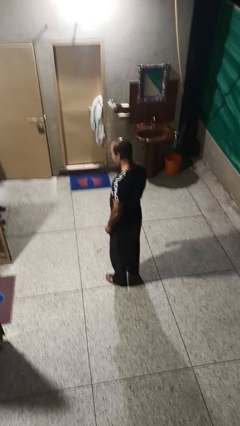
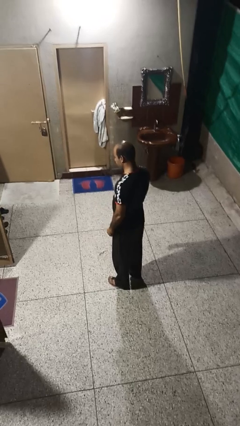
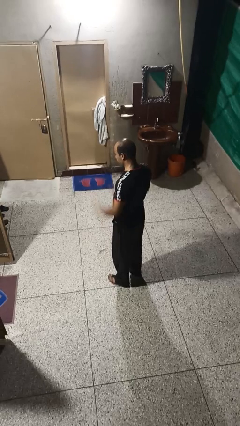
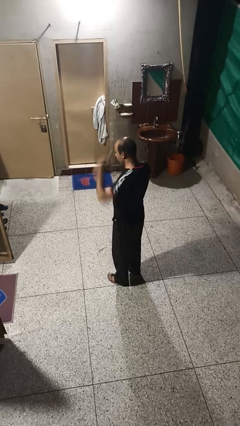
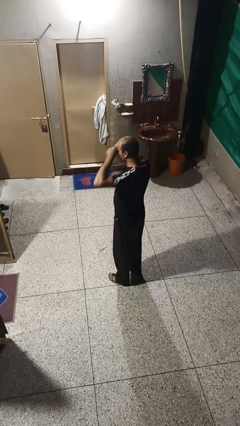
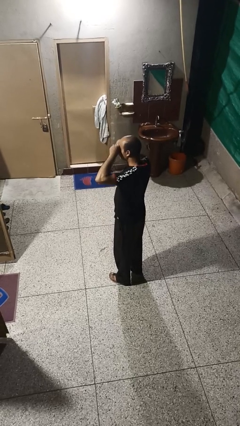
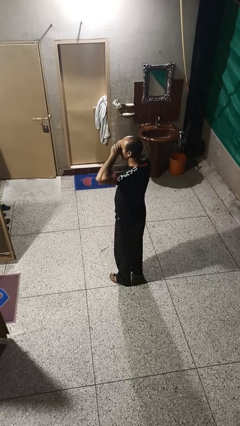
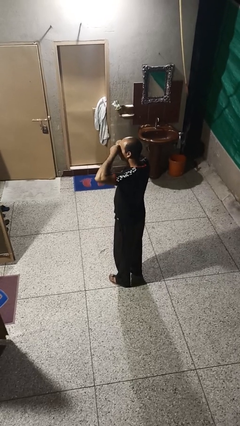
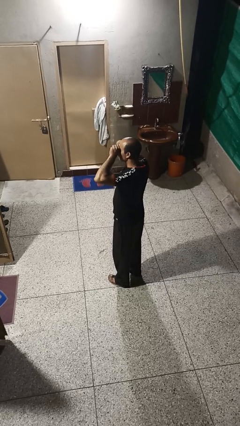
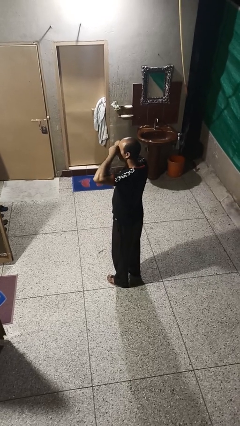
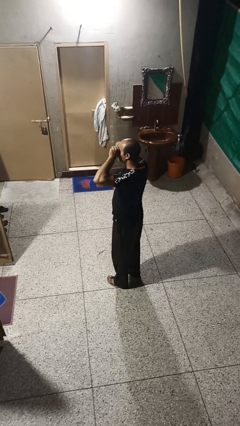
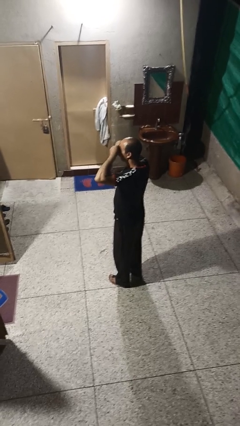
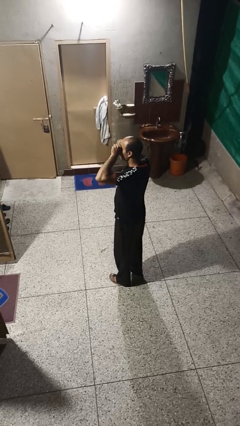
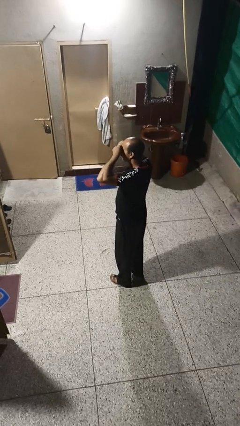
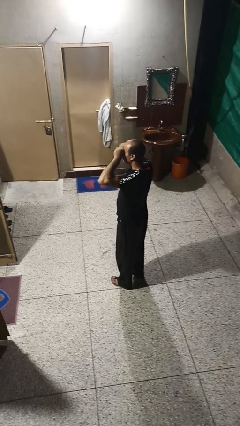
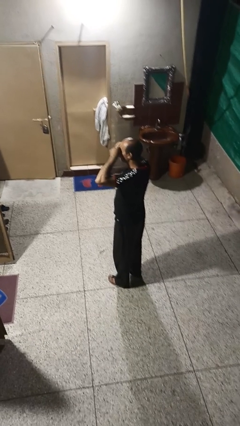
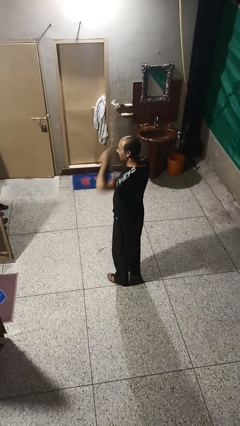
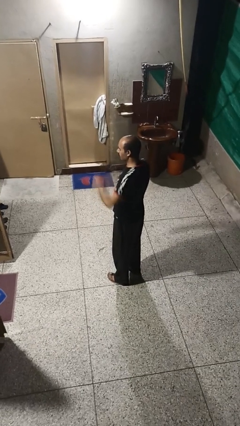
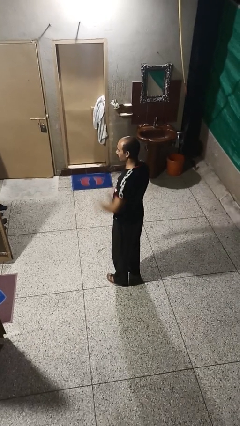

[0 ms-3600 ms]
person rubs eyes

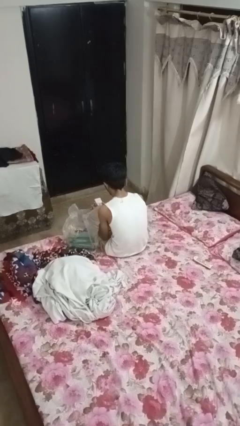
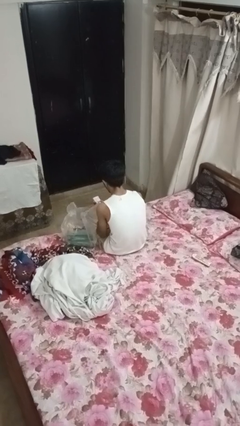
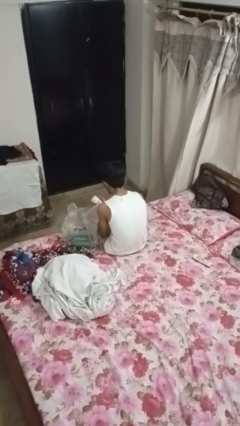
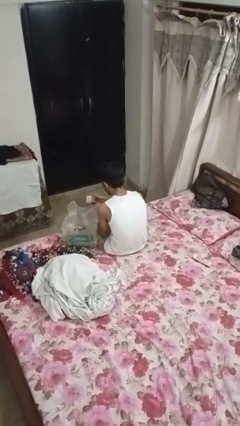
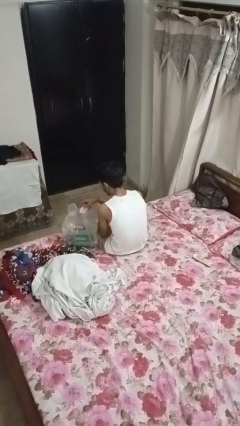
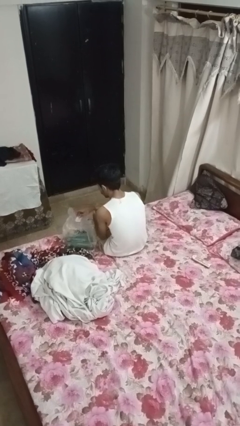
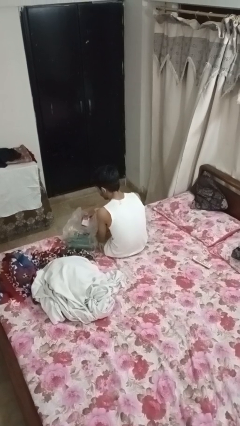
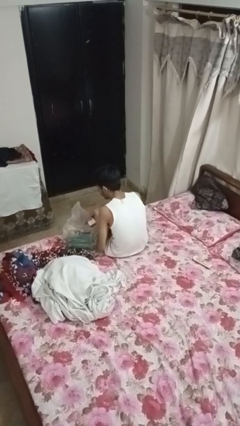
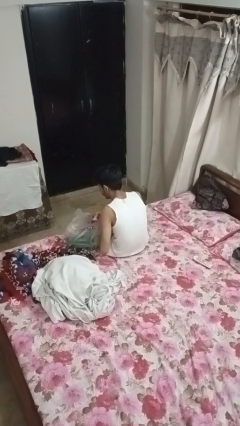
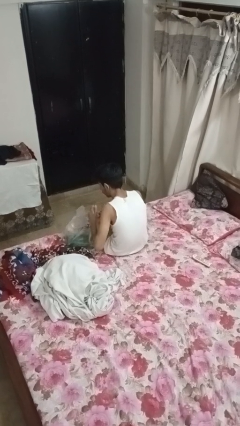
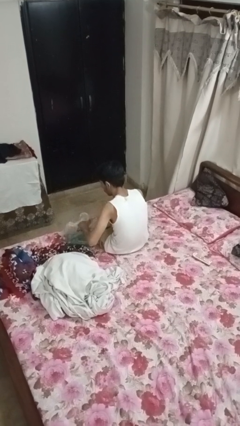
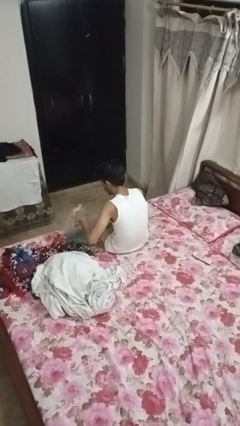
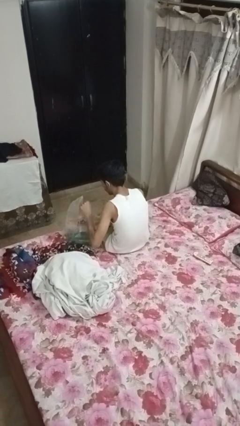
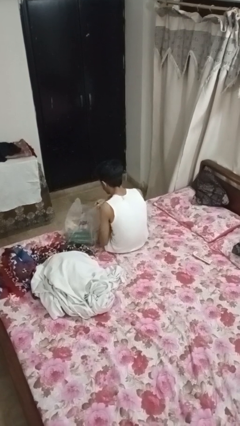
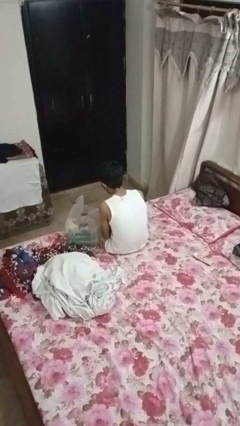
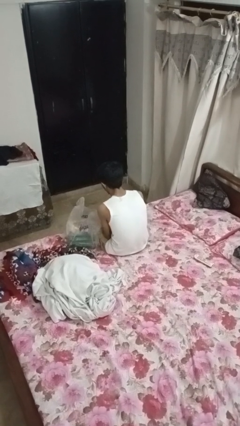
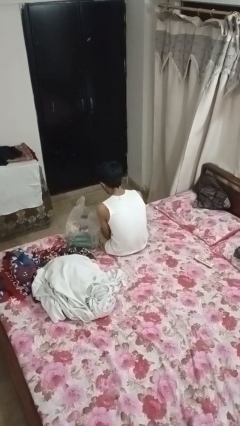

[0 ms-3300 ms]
person puts object into bag

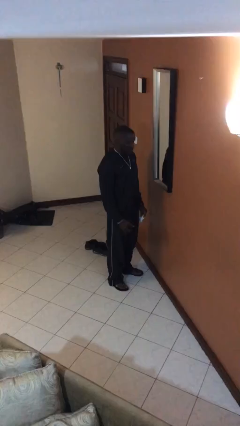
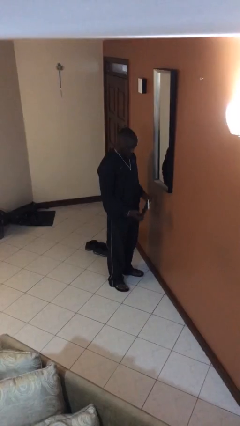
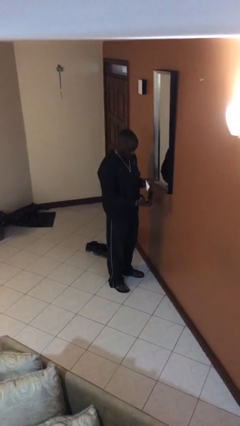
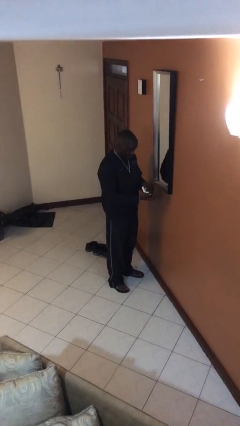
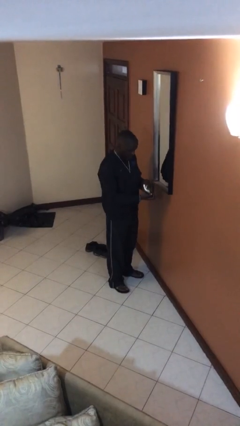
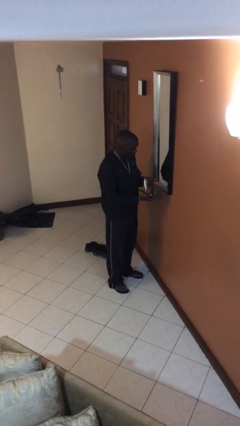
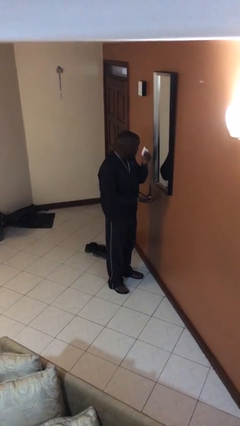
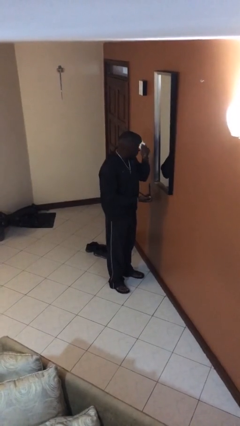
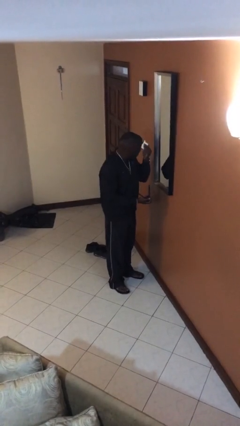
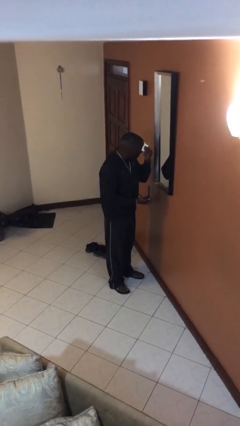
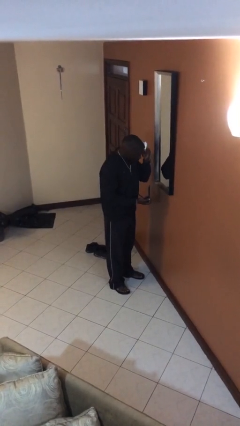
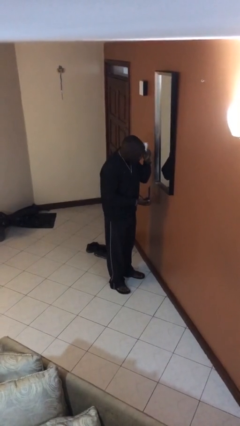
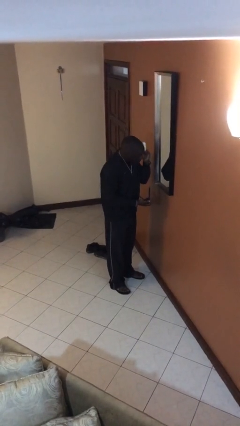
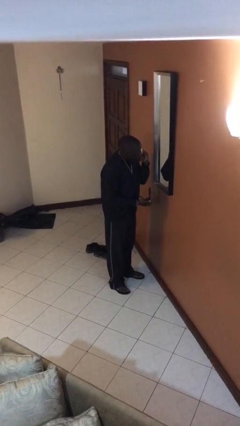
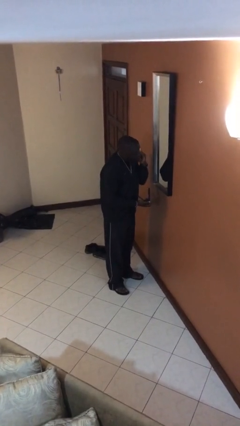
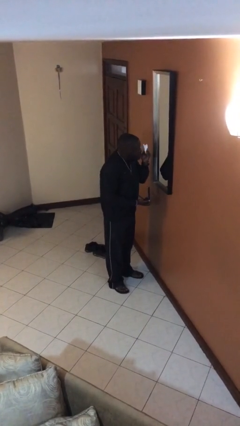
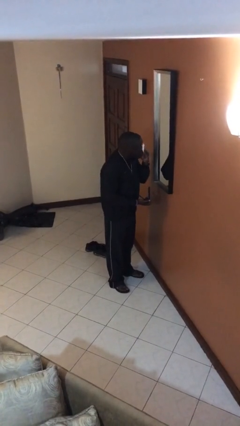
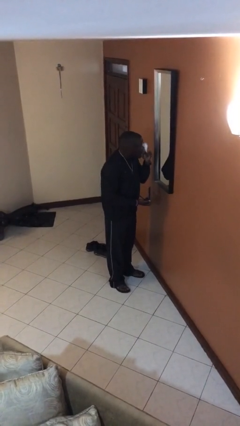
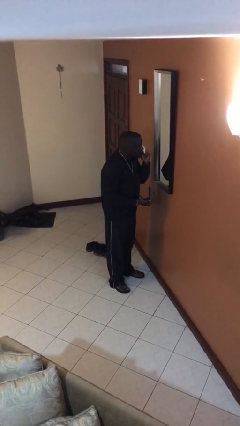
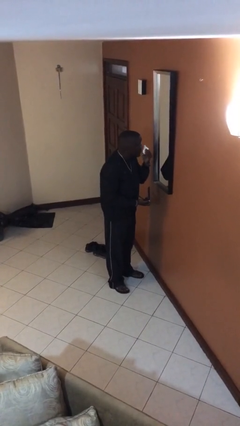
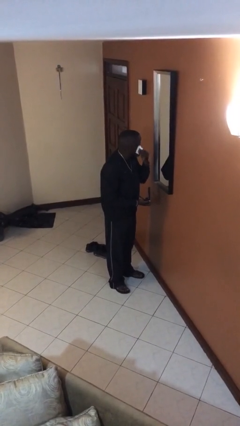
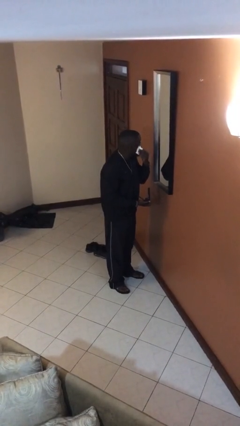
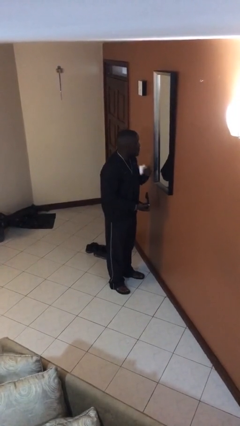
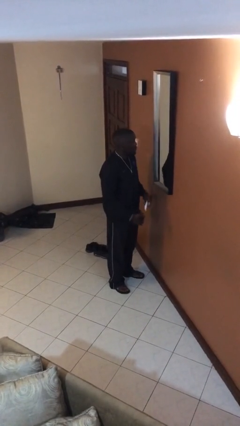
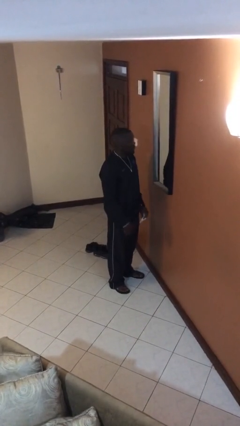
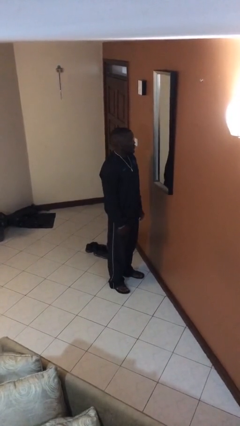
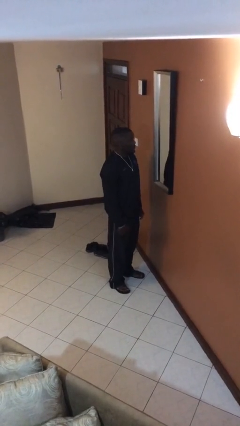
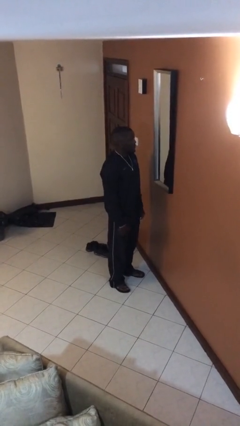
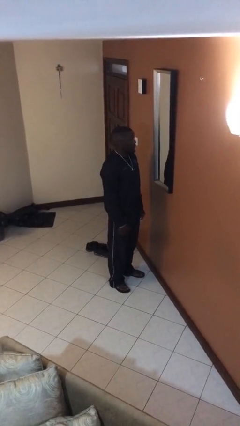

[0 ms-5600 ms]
person applies foundation makeup

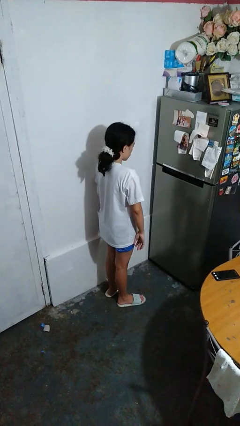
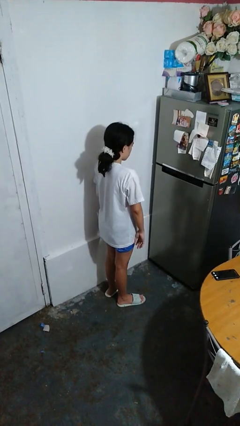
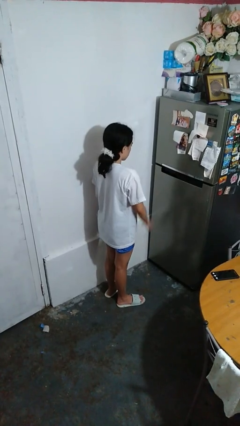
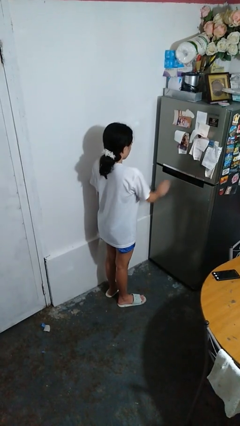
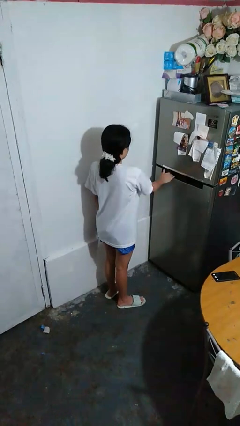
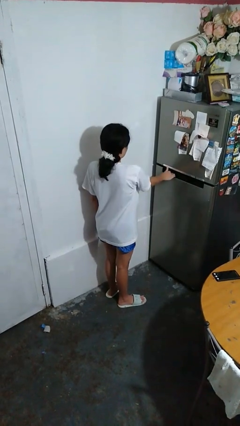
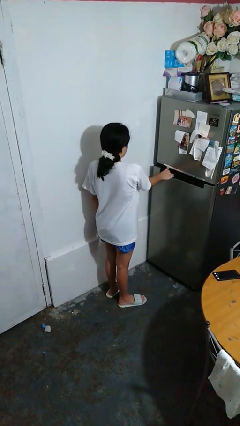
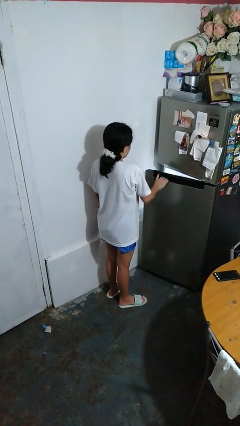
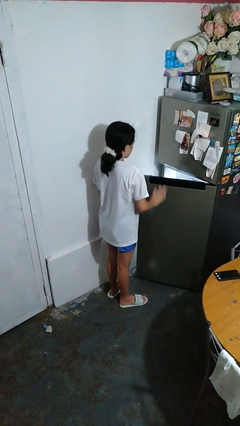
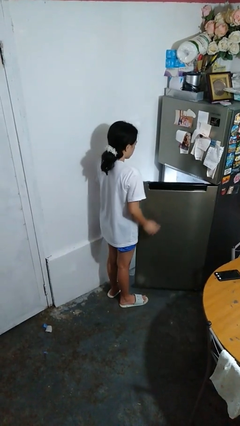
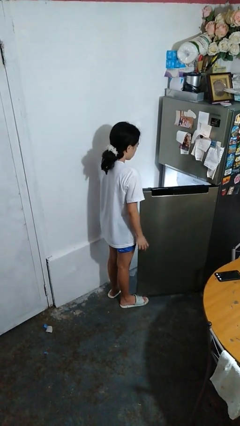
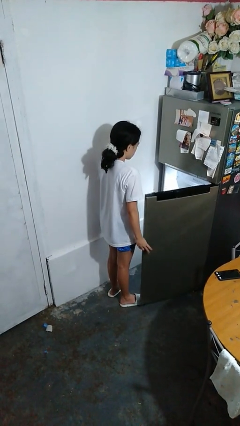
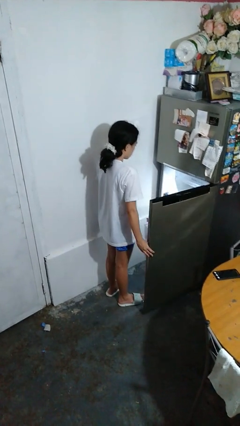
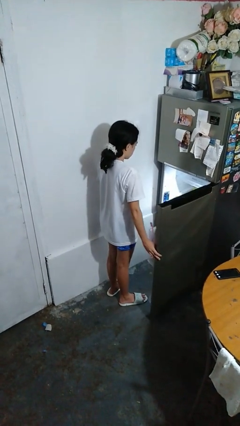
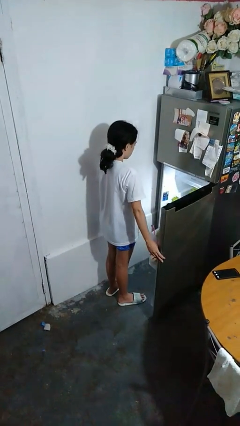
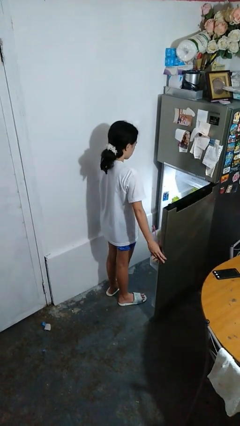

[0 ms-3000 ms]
person opens refrigerator

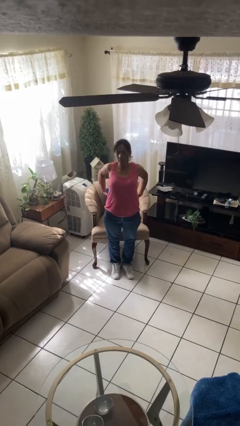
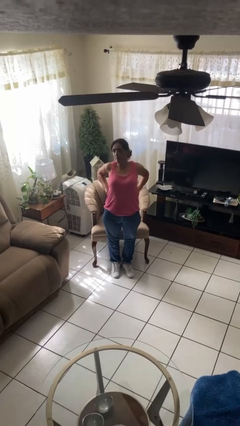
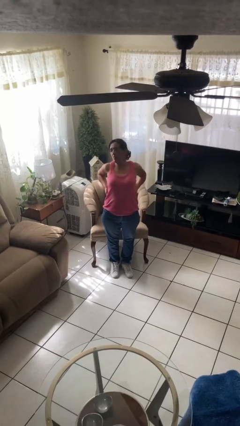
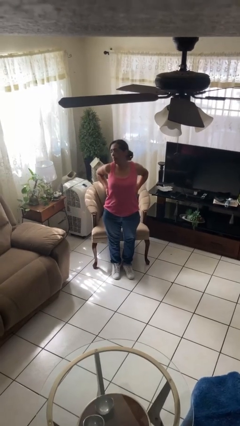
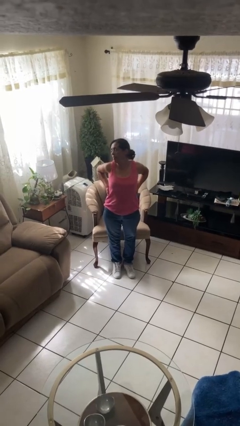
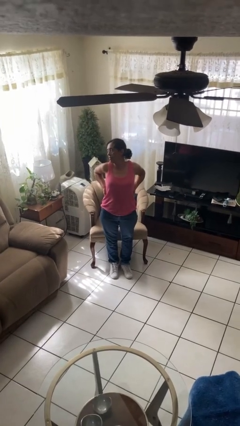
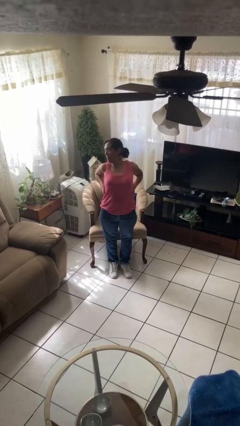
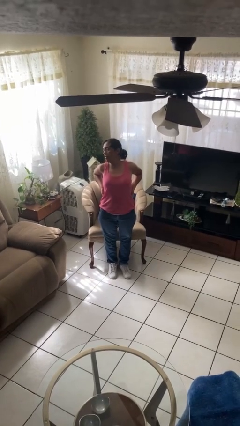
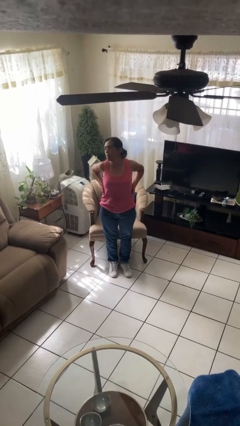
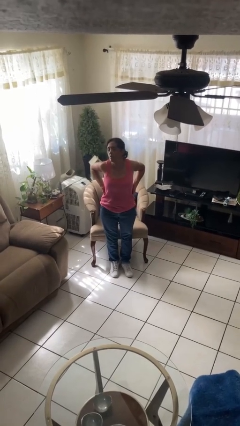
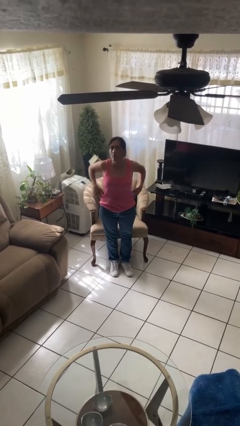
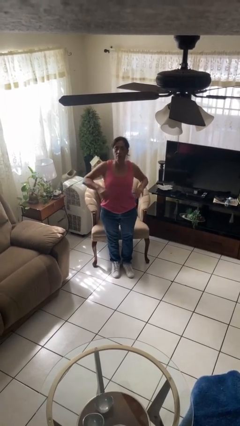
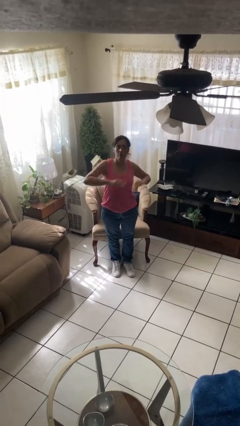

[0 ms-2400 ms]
person stretches back
